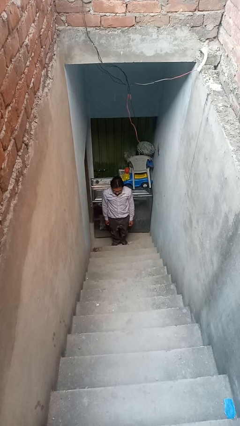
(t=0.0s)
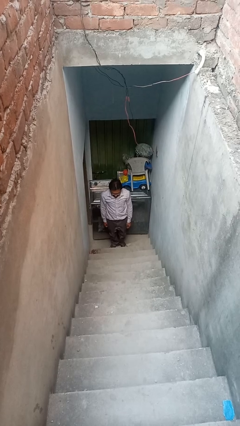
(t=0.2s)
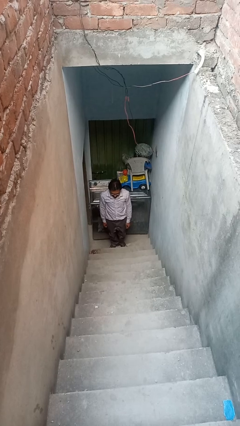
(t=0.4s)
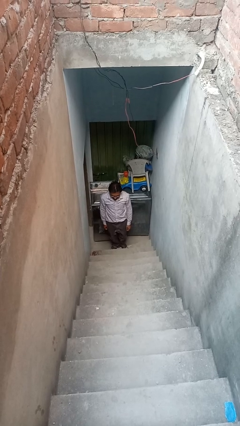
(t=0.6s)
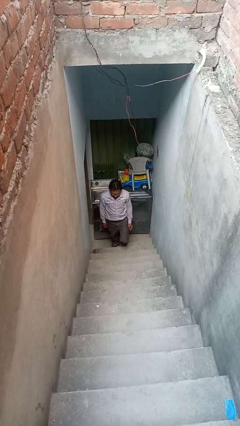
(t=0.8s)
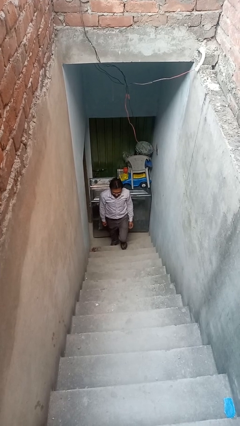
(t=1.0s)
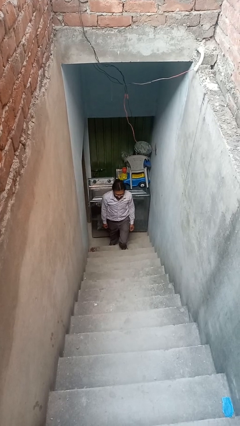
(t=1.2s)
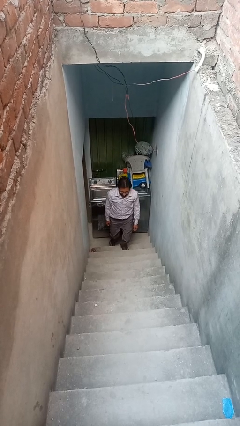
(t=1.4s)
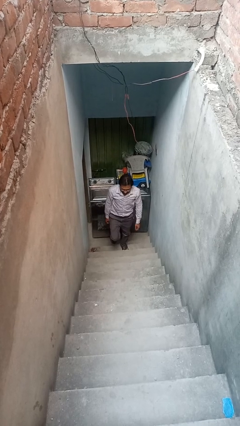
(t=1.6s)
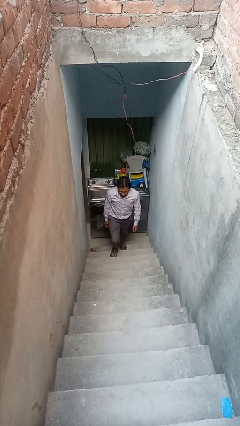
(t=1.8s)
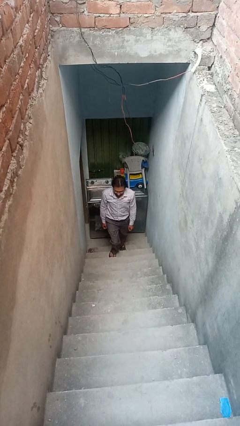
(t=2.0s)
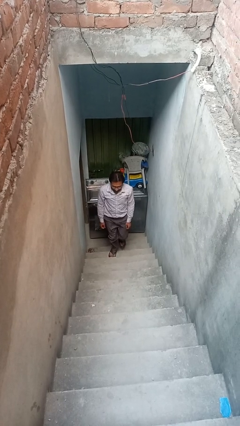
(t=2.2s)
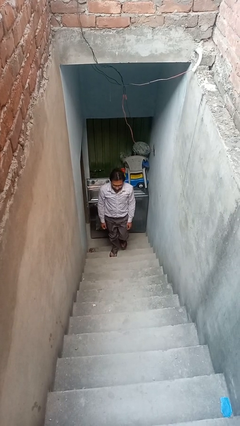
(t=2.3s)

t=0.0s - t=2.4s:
person climbs up stairs

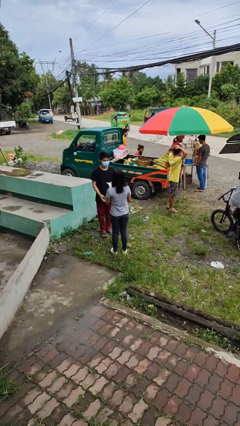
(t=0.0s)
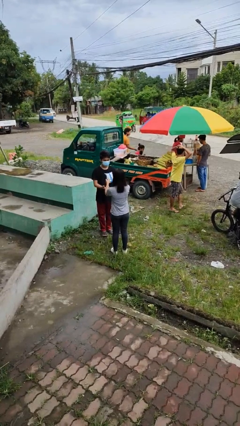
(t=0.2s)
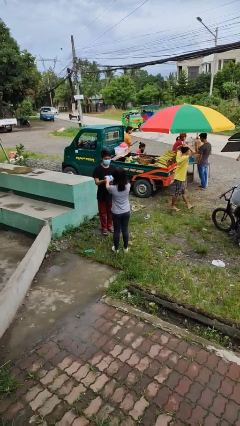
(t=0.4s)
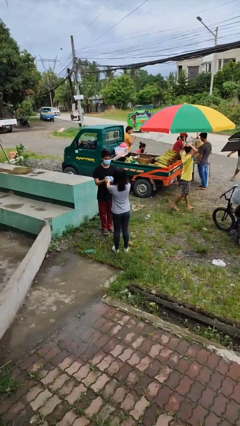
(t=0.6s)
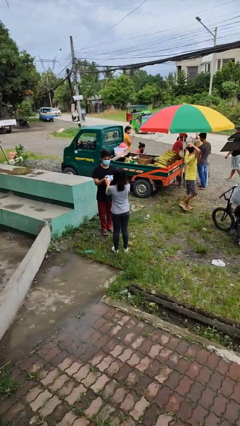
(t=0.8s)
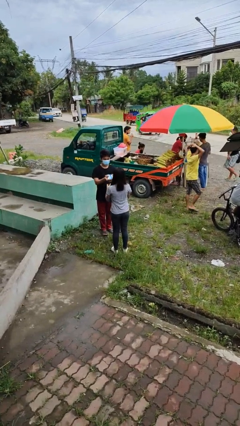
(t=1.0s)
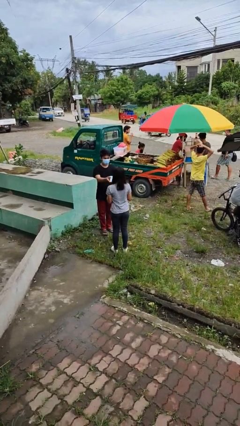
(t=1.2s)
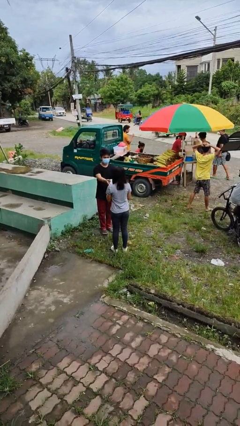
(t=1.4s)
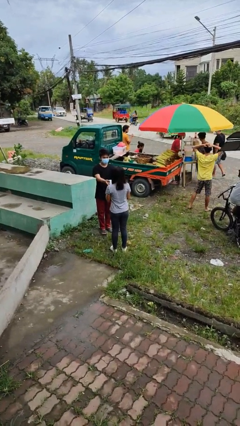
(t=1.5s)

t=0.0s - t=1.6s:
person transfers object to person

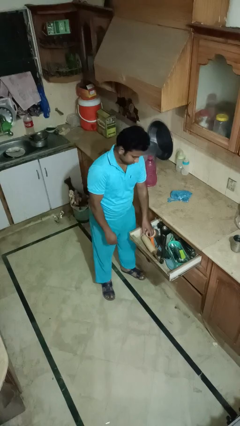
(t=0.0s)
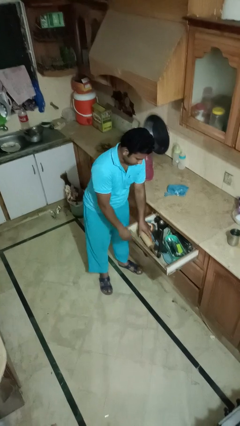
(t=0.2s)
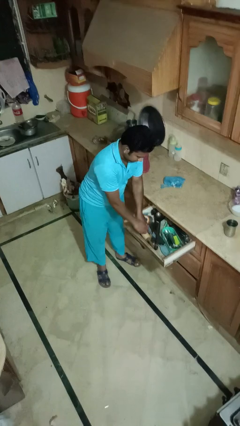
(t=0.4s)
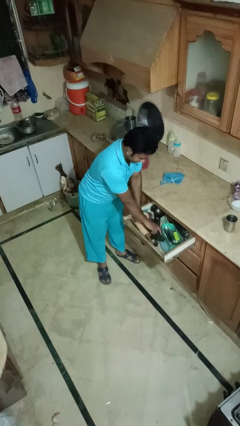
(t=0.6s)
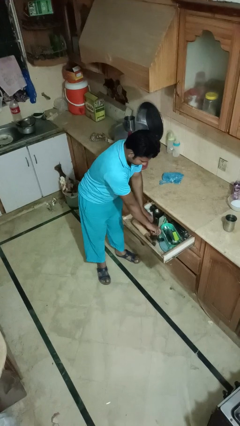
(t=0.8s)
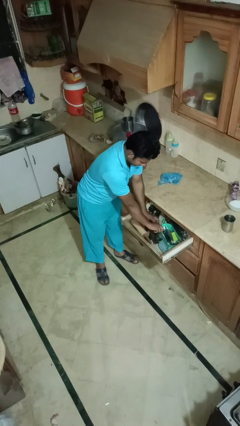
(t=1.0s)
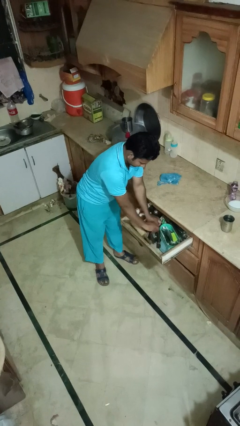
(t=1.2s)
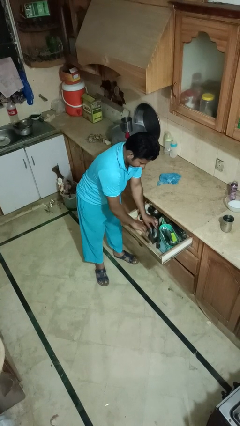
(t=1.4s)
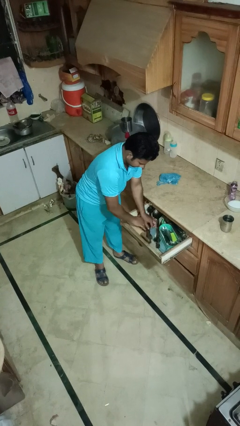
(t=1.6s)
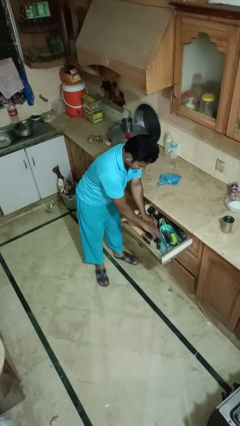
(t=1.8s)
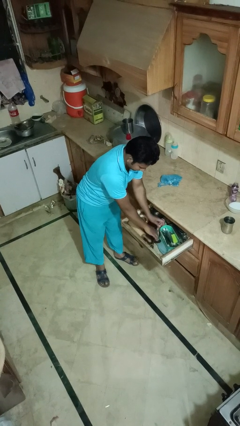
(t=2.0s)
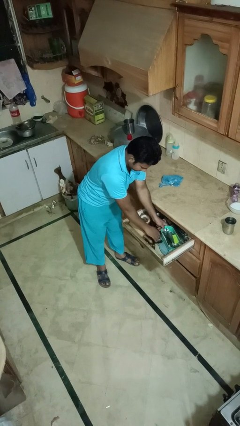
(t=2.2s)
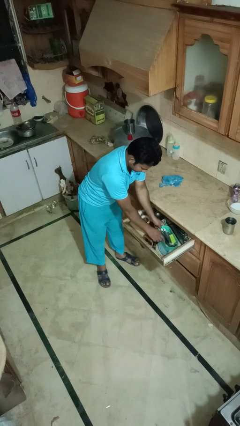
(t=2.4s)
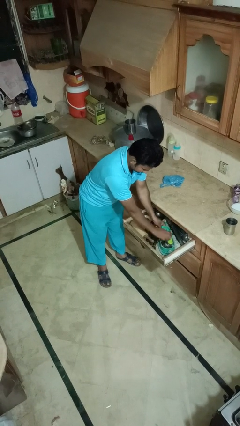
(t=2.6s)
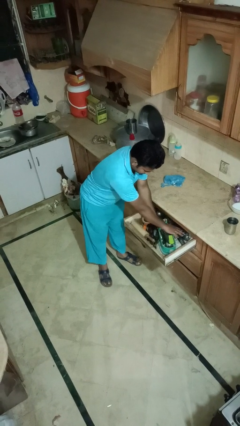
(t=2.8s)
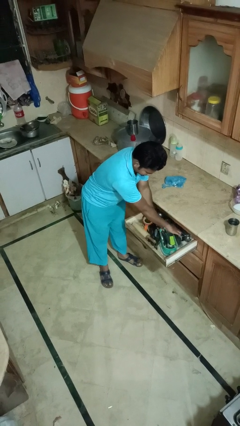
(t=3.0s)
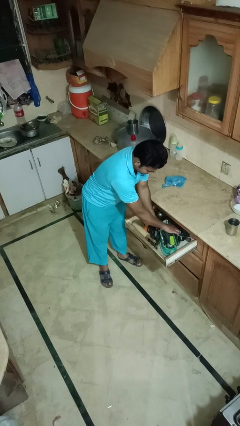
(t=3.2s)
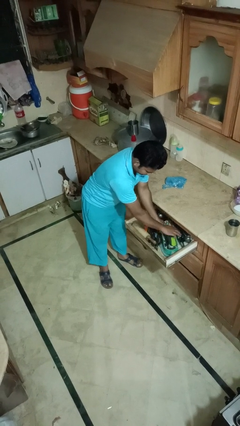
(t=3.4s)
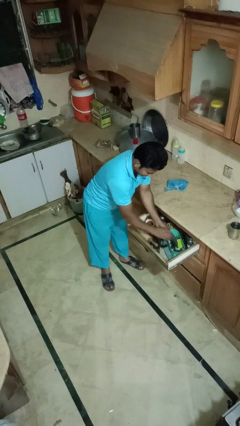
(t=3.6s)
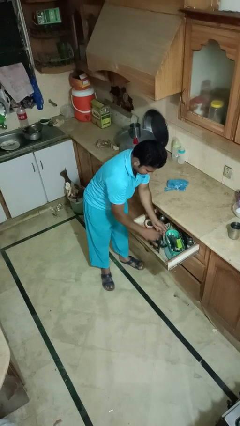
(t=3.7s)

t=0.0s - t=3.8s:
person searches in kitchen drawer

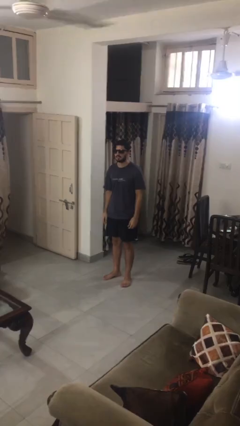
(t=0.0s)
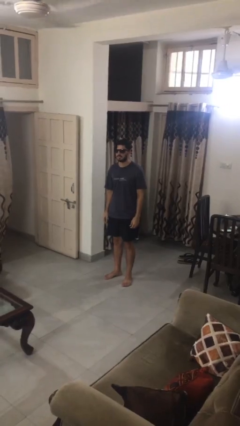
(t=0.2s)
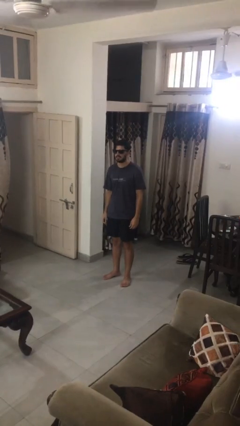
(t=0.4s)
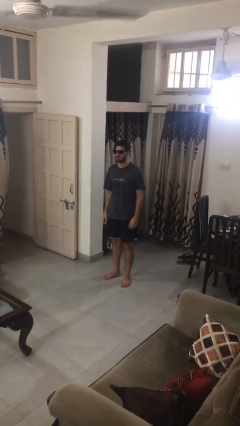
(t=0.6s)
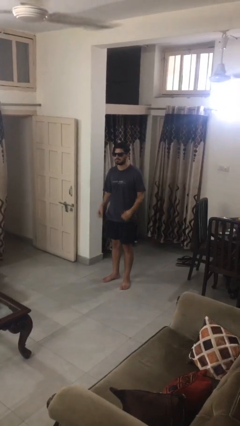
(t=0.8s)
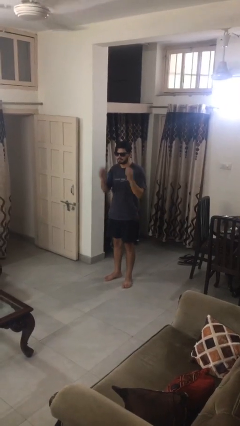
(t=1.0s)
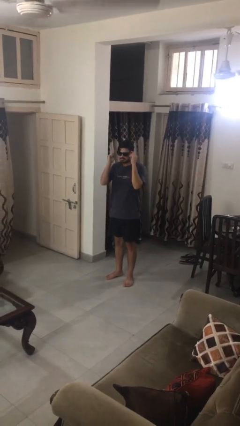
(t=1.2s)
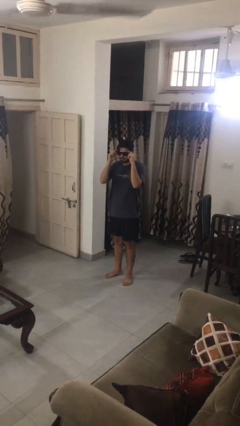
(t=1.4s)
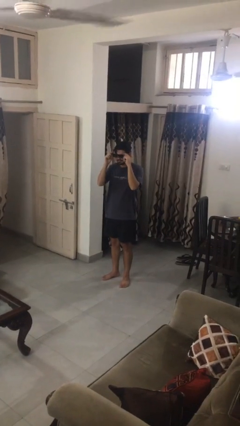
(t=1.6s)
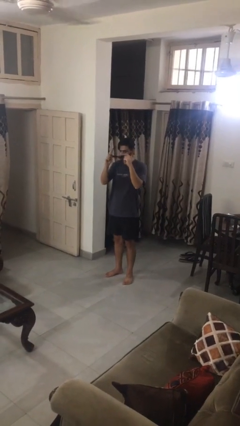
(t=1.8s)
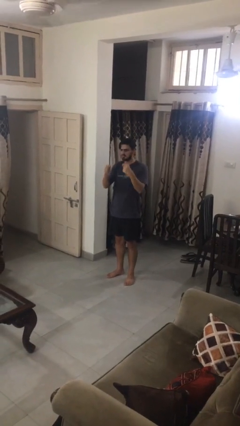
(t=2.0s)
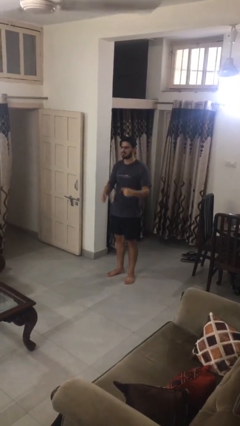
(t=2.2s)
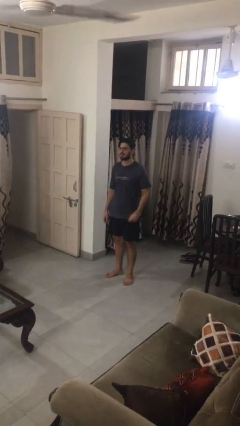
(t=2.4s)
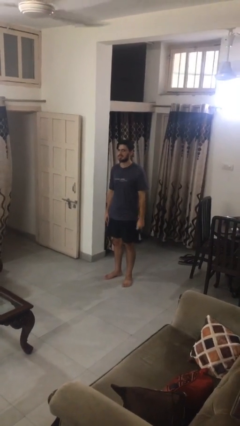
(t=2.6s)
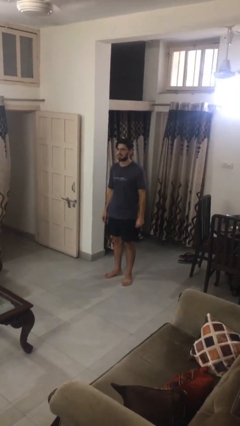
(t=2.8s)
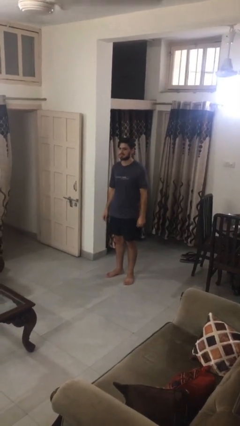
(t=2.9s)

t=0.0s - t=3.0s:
person takes off sunglasses

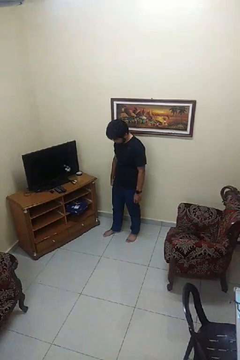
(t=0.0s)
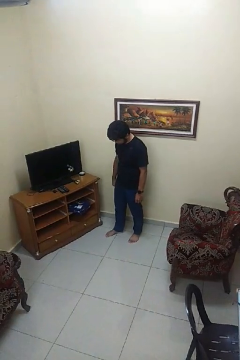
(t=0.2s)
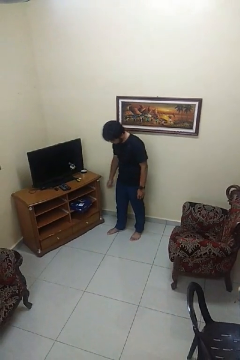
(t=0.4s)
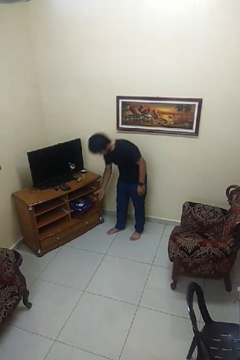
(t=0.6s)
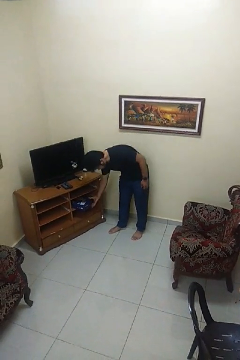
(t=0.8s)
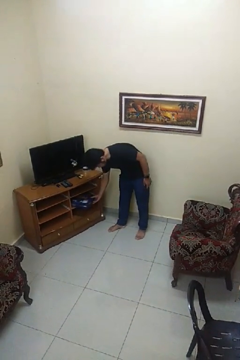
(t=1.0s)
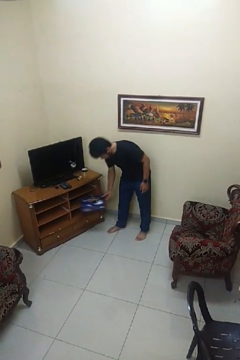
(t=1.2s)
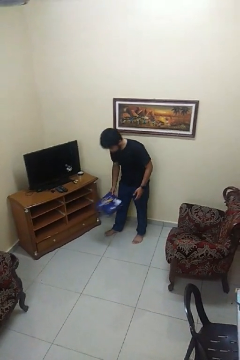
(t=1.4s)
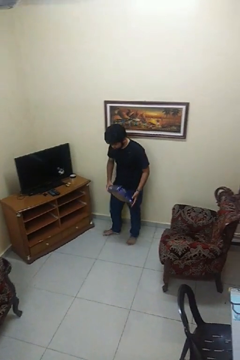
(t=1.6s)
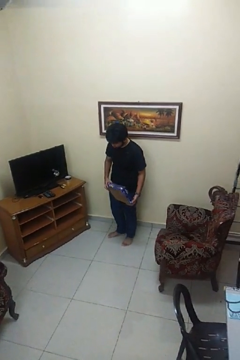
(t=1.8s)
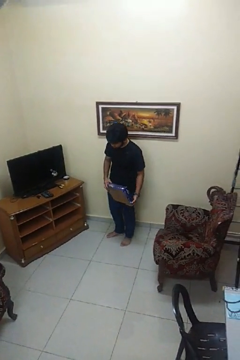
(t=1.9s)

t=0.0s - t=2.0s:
person picks up object from cabinet

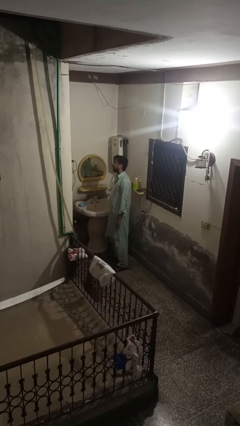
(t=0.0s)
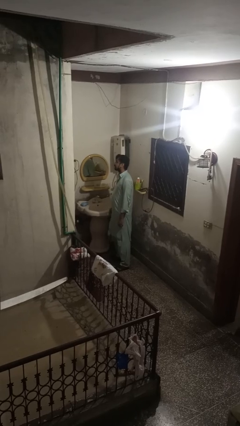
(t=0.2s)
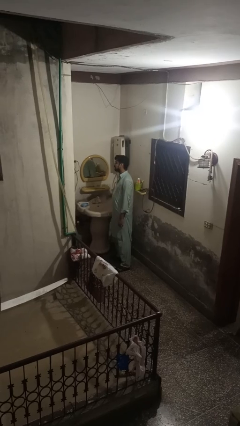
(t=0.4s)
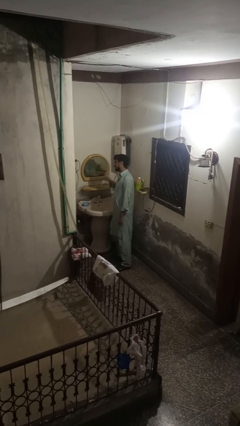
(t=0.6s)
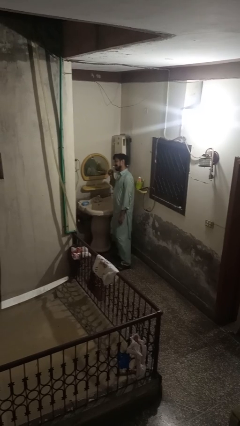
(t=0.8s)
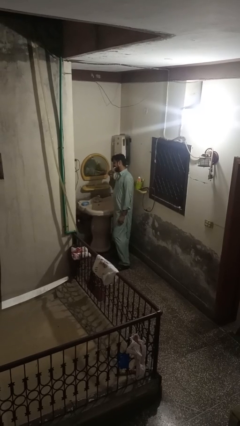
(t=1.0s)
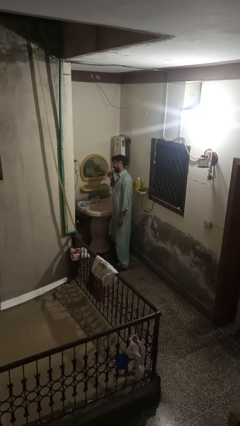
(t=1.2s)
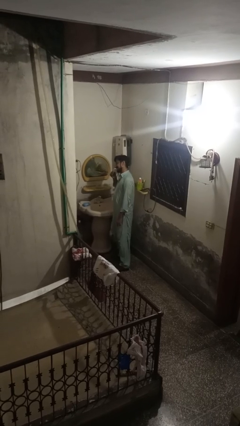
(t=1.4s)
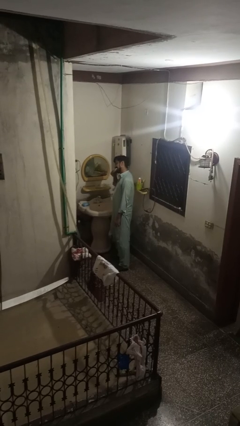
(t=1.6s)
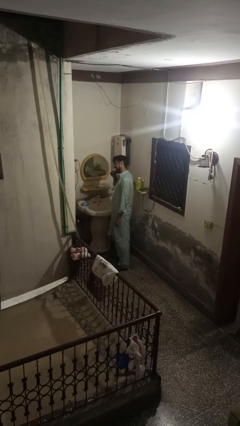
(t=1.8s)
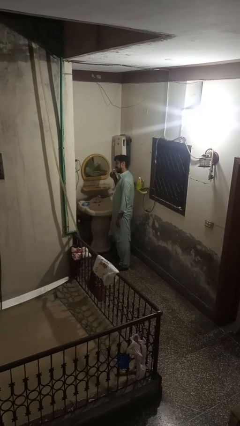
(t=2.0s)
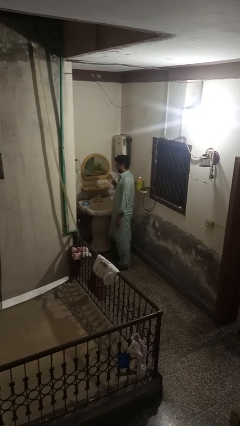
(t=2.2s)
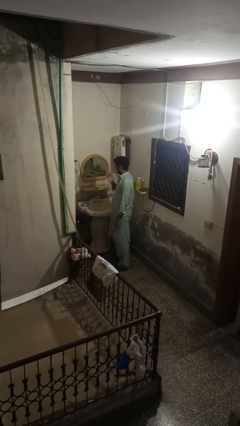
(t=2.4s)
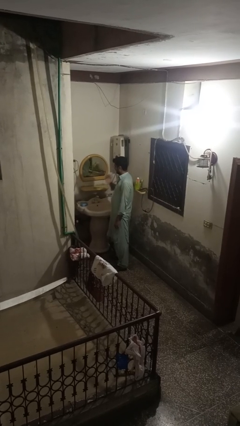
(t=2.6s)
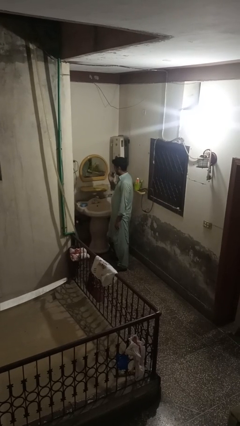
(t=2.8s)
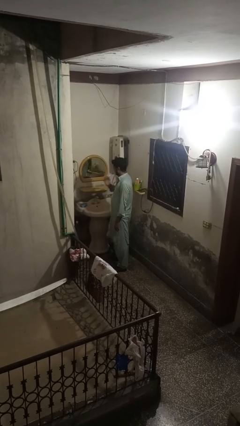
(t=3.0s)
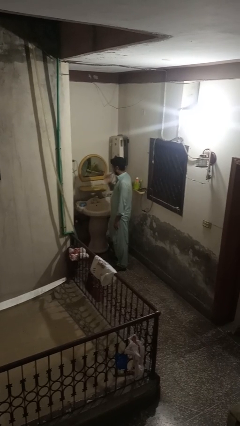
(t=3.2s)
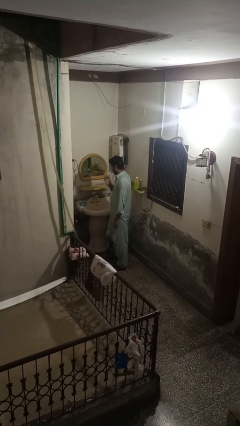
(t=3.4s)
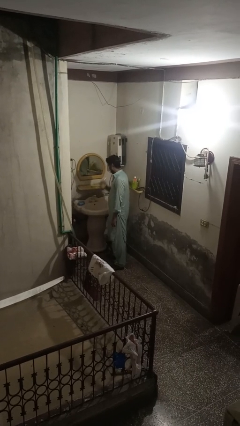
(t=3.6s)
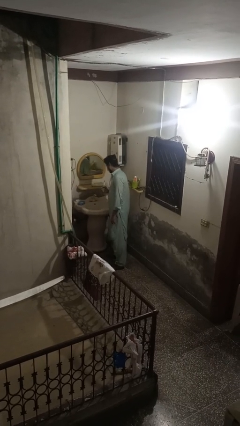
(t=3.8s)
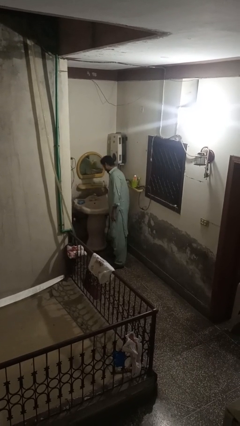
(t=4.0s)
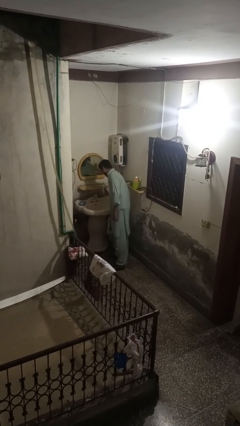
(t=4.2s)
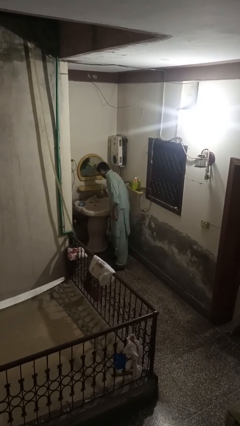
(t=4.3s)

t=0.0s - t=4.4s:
person brushes teeth

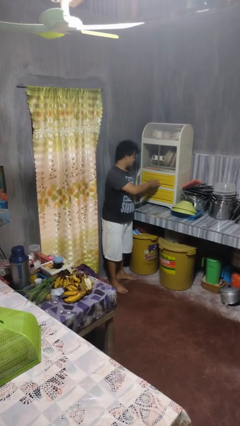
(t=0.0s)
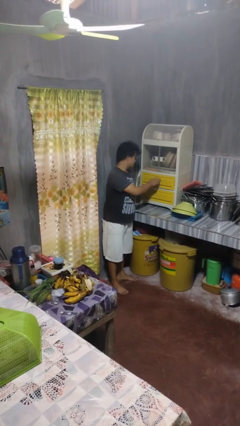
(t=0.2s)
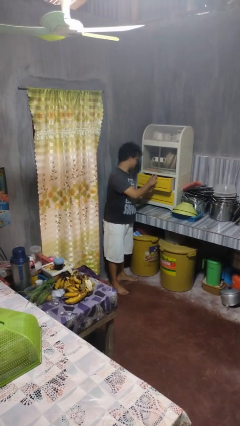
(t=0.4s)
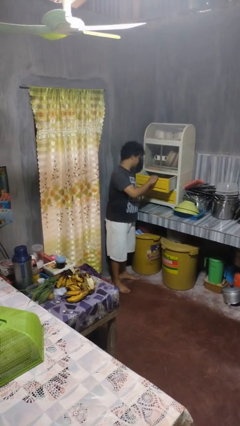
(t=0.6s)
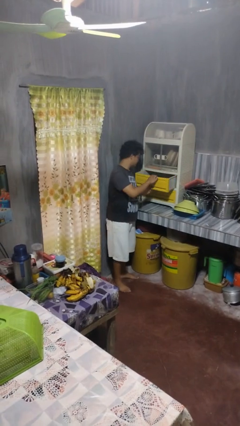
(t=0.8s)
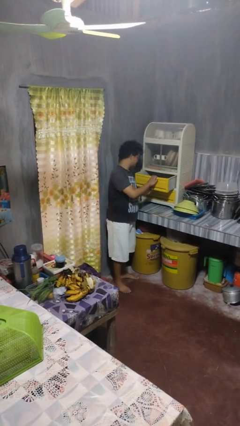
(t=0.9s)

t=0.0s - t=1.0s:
person opens kitchen drawer
